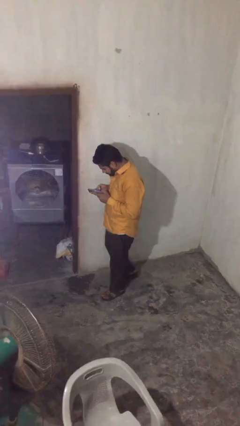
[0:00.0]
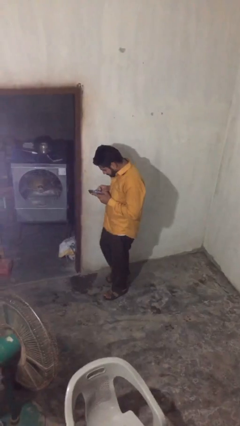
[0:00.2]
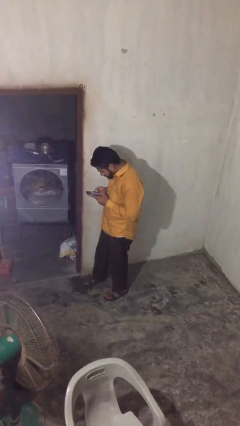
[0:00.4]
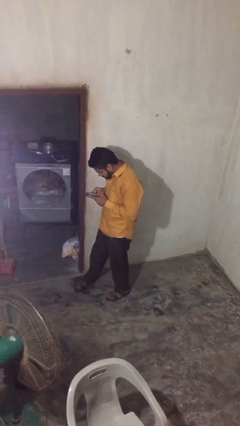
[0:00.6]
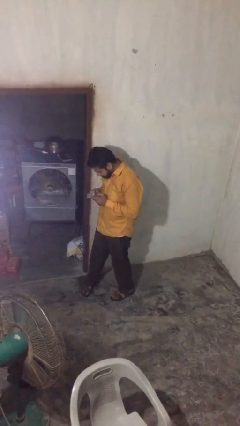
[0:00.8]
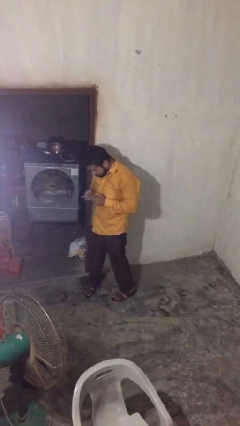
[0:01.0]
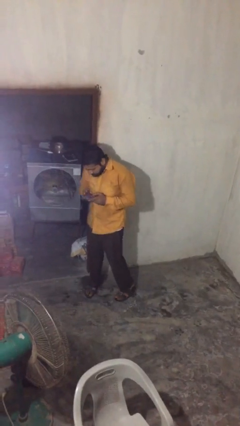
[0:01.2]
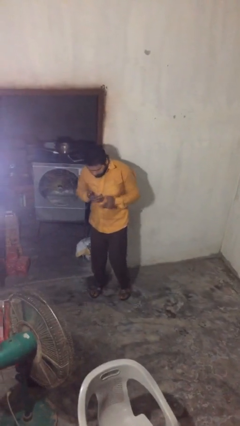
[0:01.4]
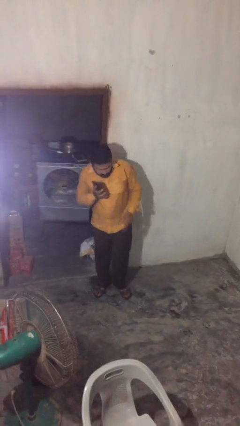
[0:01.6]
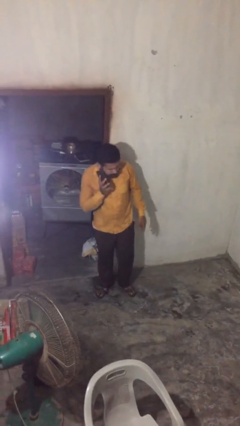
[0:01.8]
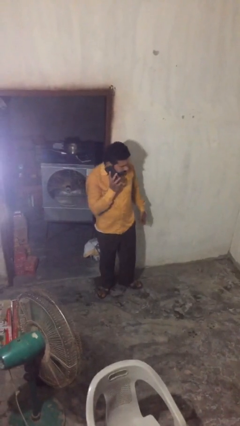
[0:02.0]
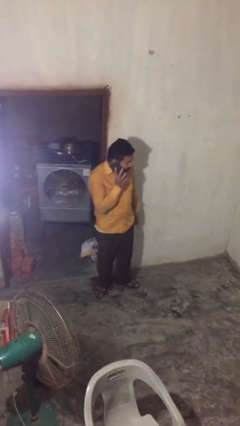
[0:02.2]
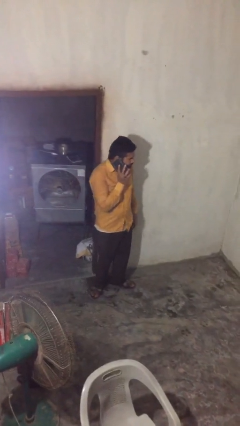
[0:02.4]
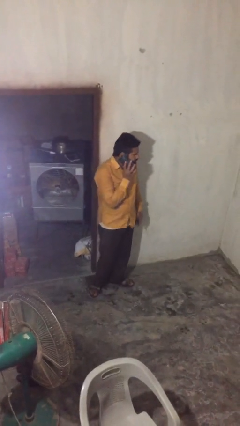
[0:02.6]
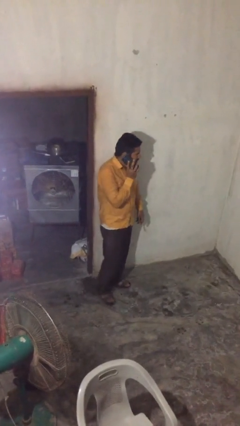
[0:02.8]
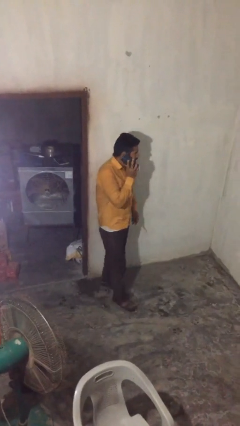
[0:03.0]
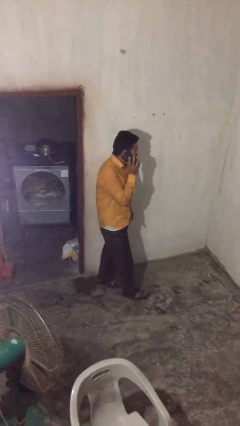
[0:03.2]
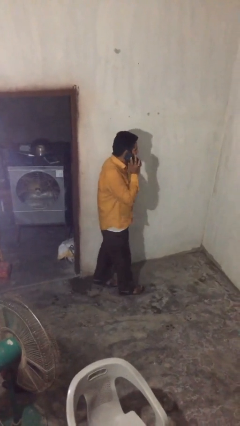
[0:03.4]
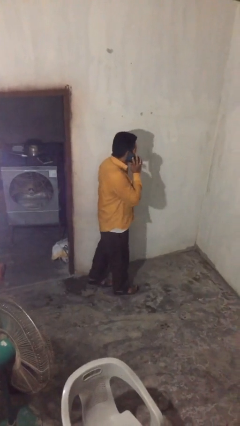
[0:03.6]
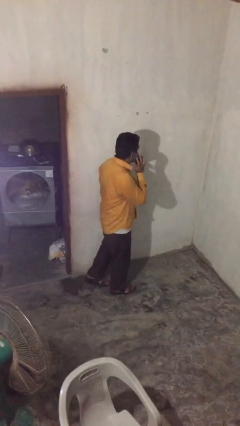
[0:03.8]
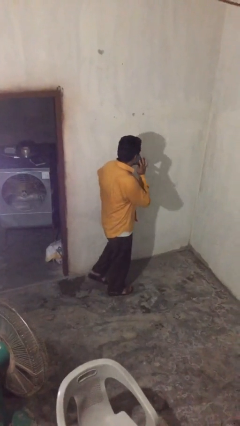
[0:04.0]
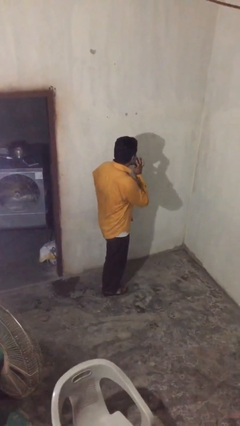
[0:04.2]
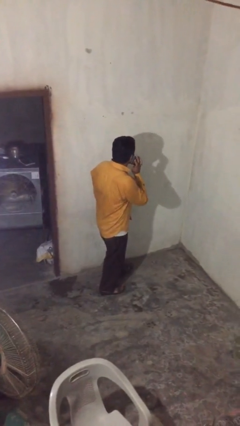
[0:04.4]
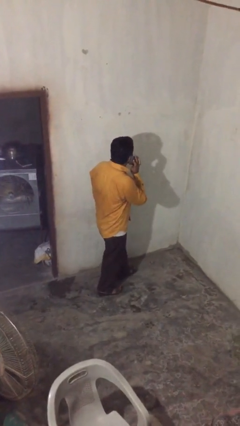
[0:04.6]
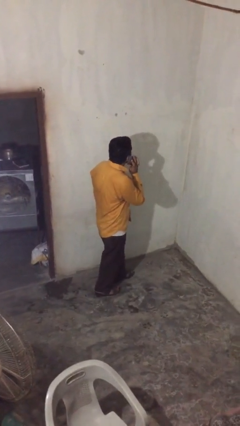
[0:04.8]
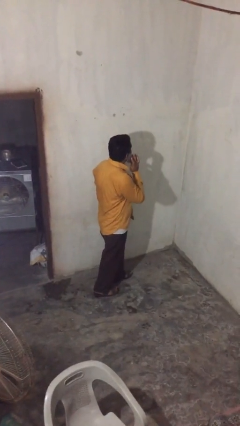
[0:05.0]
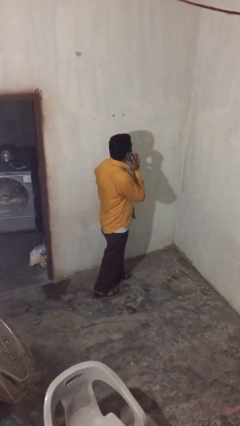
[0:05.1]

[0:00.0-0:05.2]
person talks on phone

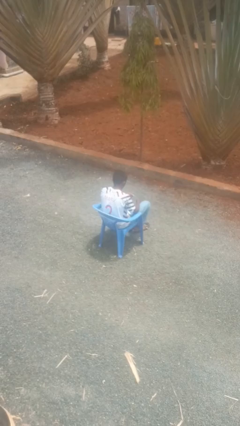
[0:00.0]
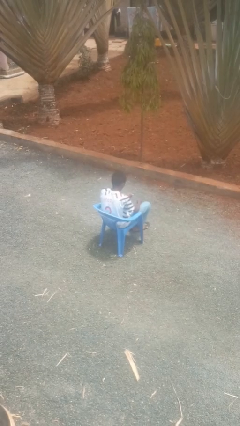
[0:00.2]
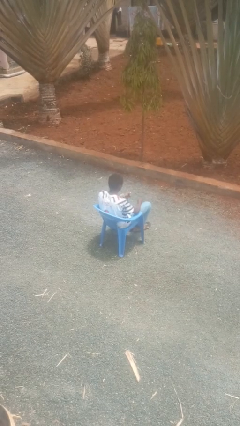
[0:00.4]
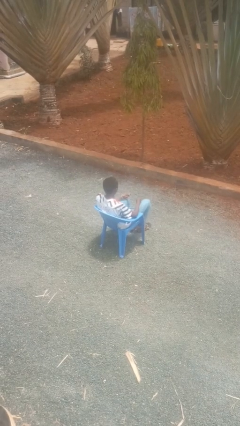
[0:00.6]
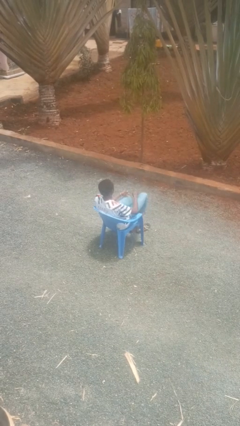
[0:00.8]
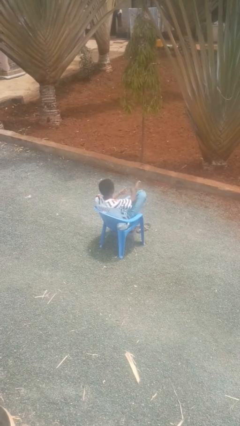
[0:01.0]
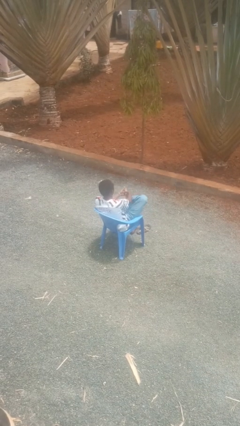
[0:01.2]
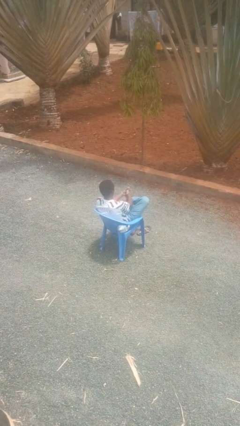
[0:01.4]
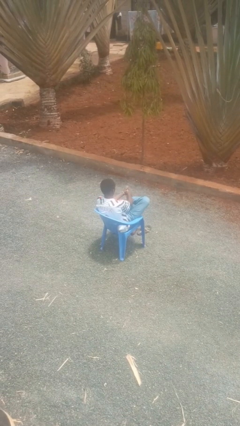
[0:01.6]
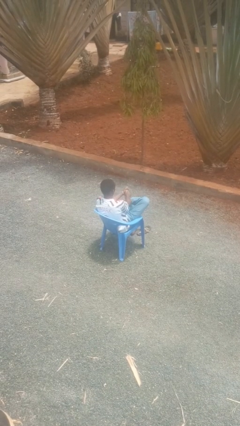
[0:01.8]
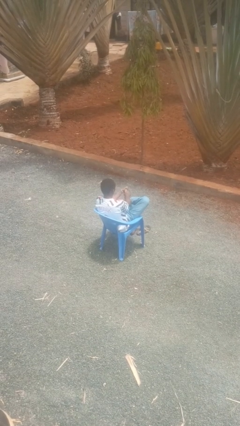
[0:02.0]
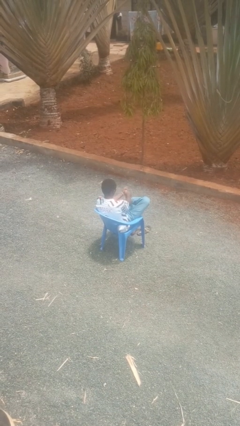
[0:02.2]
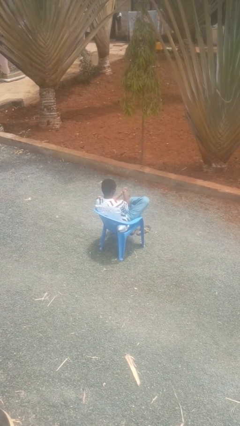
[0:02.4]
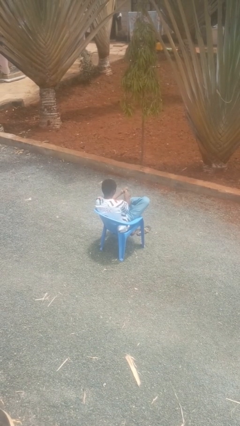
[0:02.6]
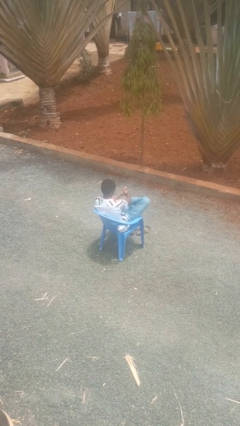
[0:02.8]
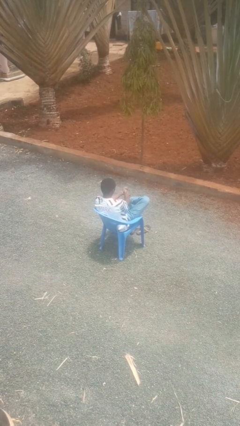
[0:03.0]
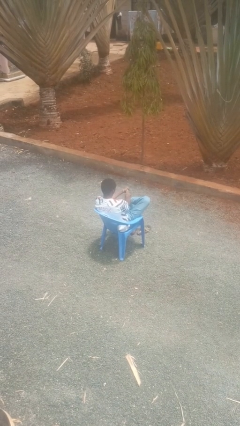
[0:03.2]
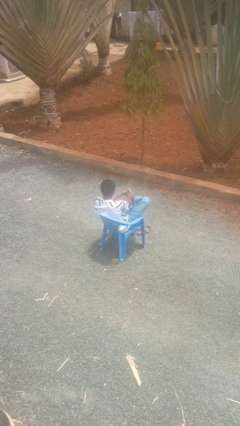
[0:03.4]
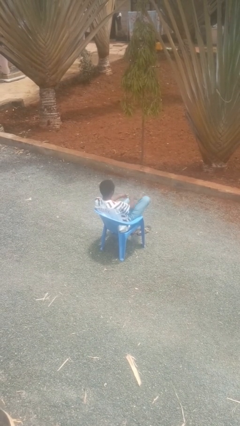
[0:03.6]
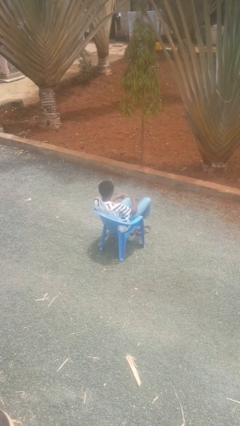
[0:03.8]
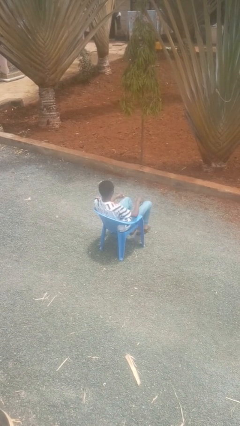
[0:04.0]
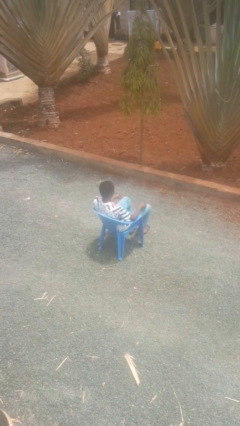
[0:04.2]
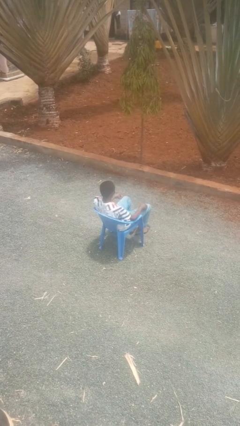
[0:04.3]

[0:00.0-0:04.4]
person rubs foot

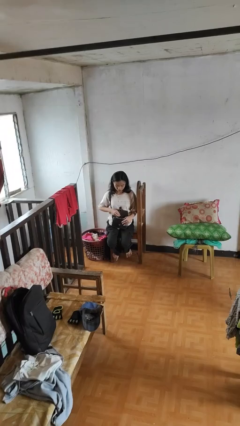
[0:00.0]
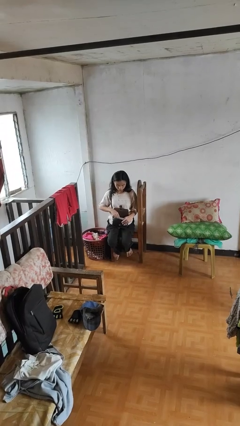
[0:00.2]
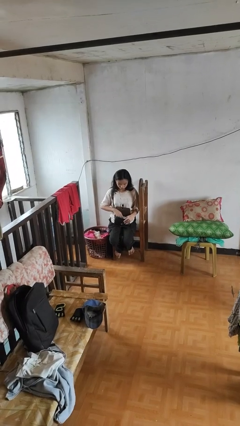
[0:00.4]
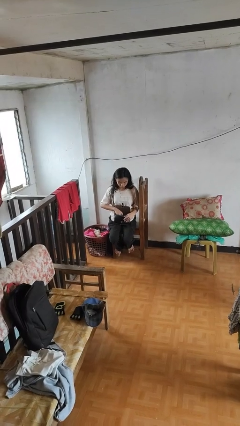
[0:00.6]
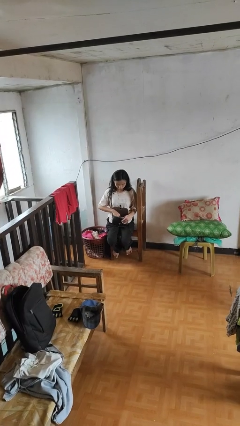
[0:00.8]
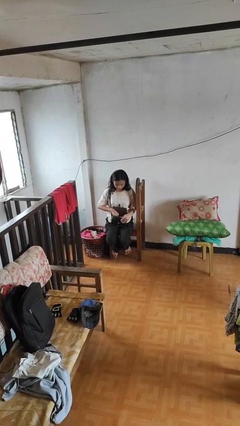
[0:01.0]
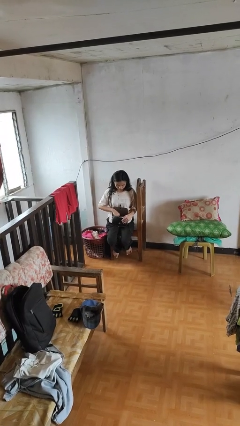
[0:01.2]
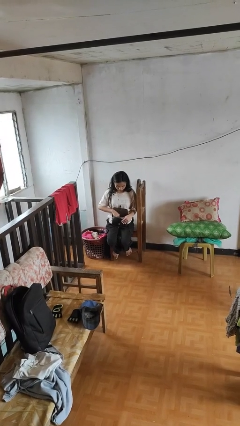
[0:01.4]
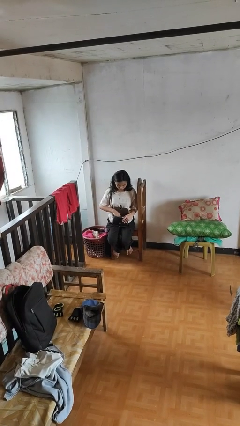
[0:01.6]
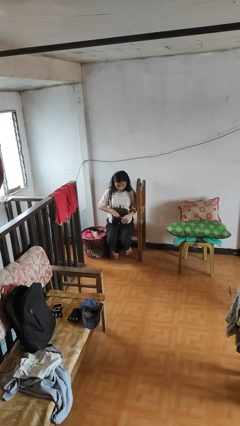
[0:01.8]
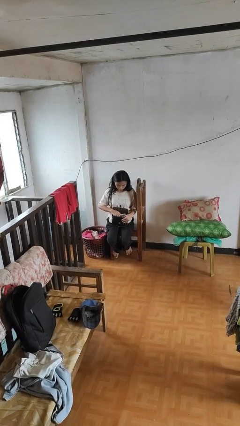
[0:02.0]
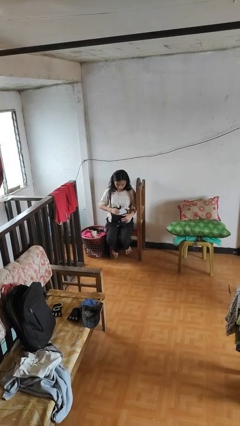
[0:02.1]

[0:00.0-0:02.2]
person searches in purse

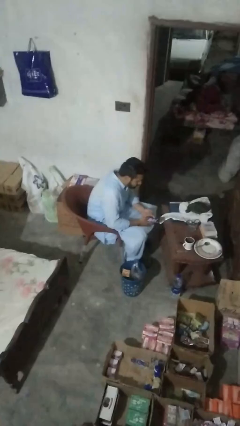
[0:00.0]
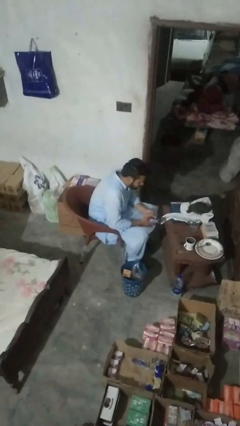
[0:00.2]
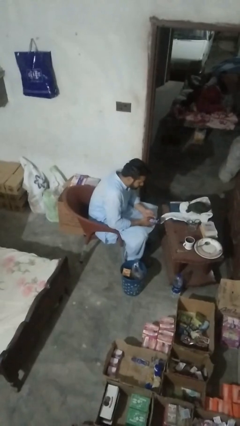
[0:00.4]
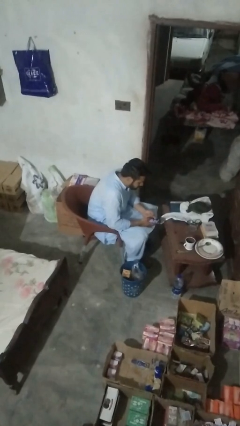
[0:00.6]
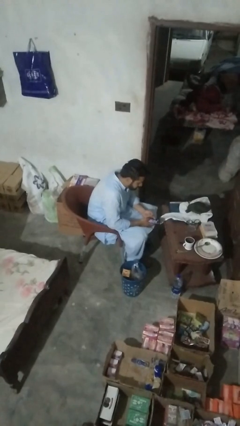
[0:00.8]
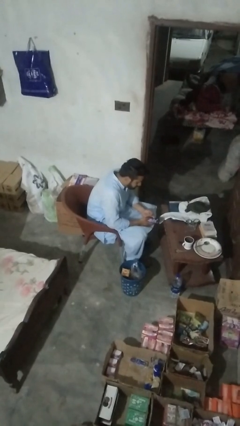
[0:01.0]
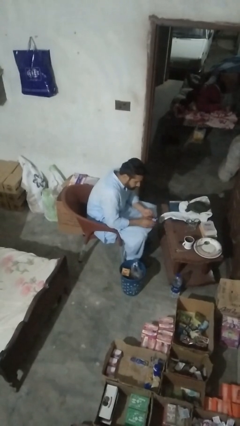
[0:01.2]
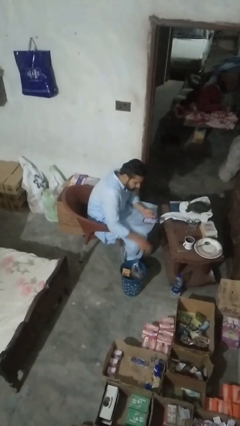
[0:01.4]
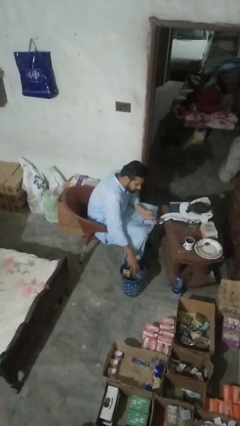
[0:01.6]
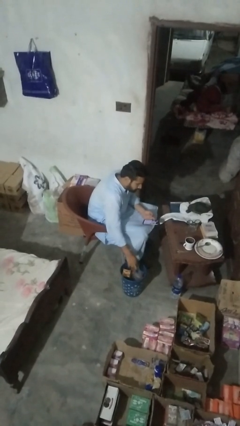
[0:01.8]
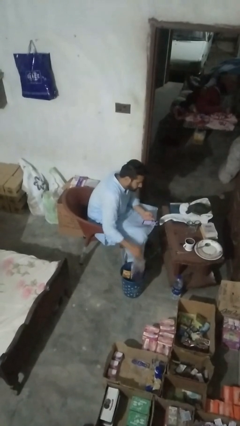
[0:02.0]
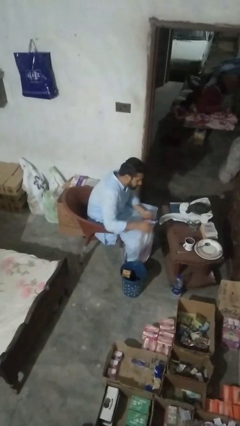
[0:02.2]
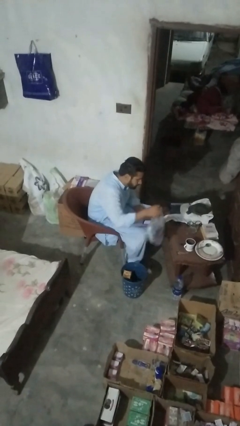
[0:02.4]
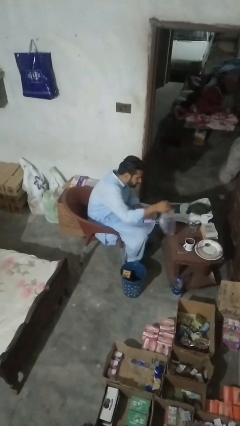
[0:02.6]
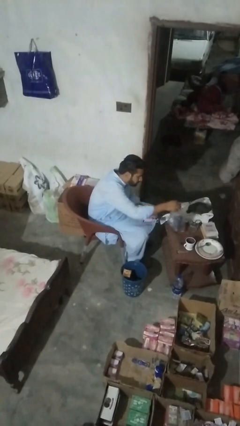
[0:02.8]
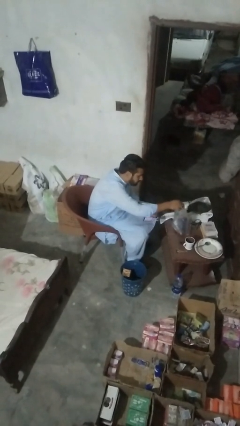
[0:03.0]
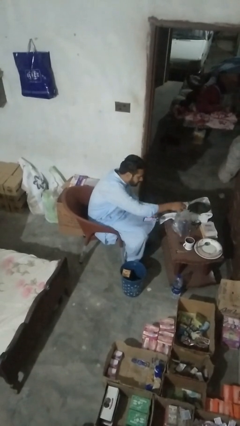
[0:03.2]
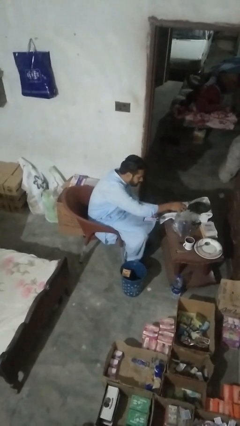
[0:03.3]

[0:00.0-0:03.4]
person inserts trashbag into trashcan

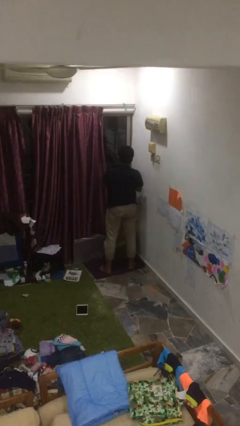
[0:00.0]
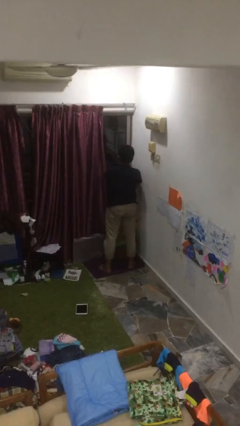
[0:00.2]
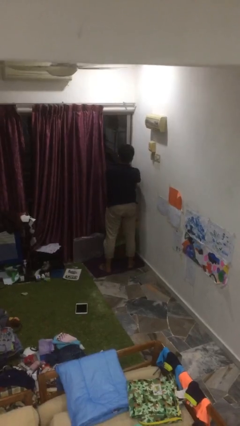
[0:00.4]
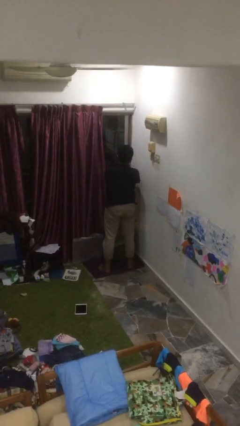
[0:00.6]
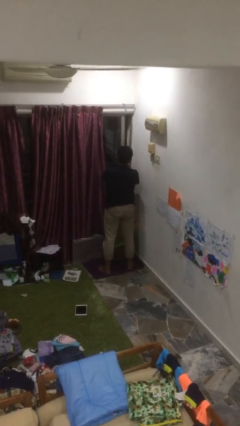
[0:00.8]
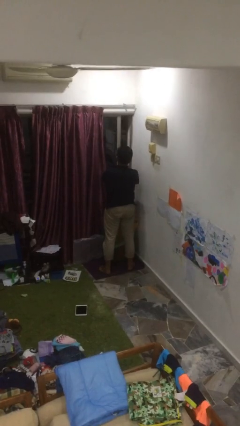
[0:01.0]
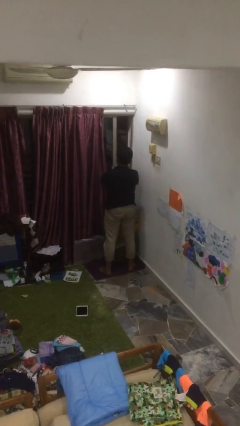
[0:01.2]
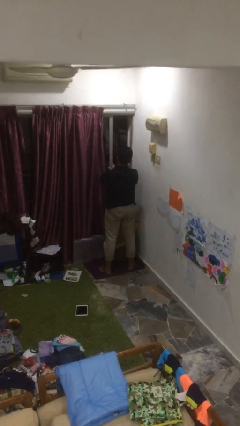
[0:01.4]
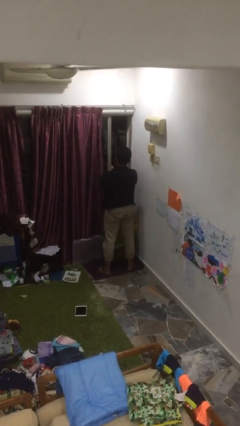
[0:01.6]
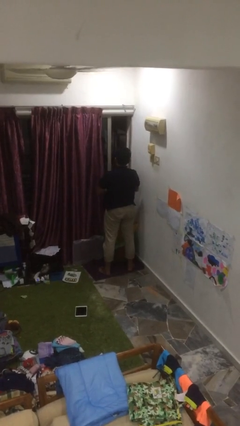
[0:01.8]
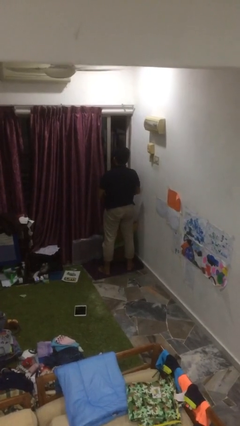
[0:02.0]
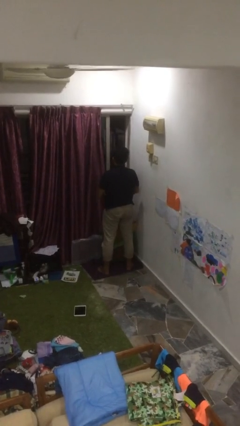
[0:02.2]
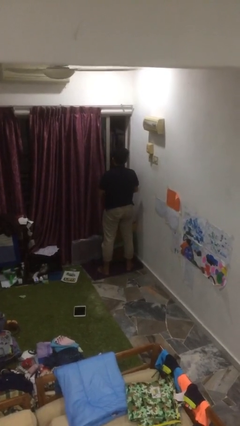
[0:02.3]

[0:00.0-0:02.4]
person opens home window
